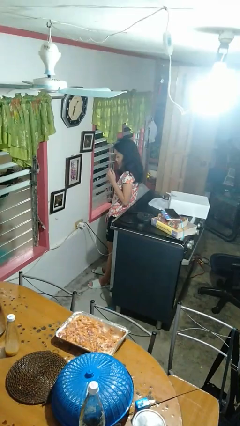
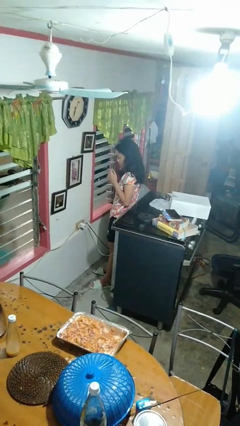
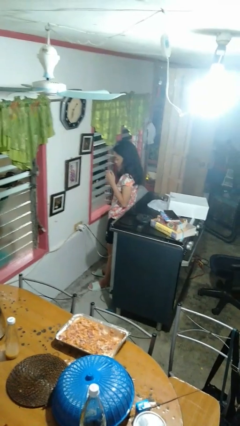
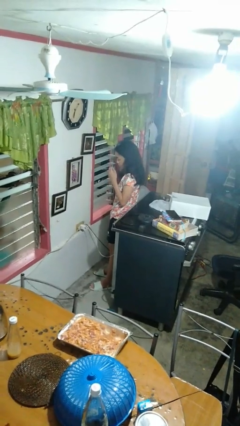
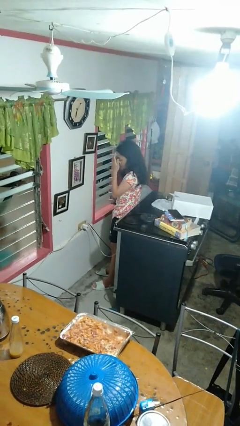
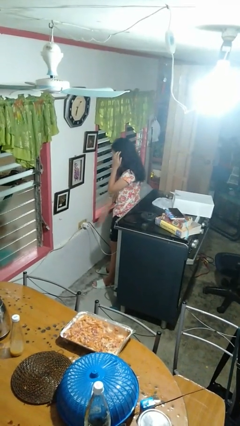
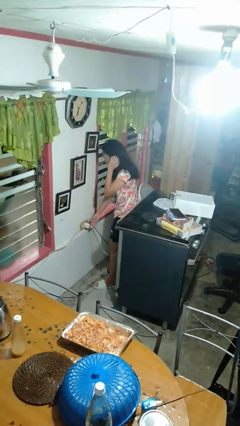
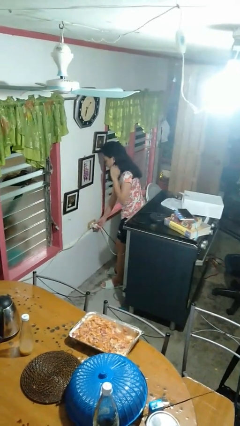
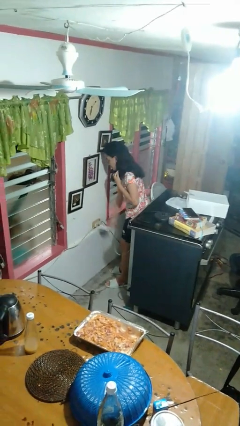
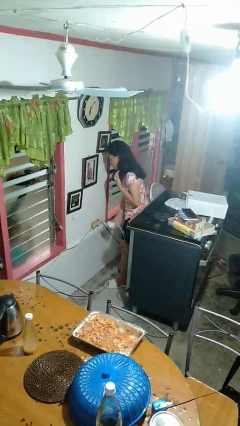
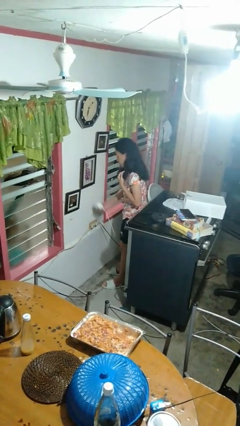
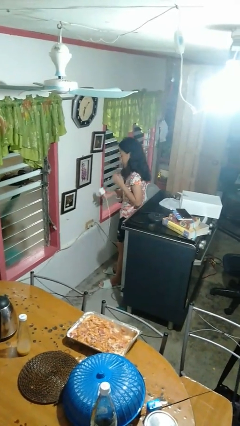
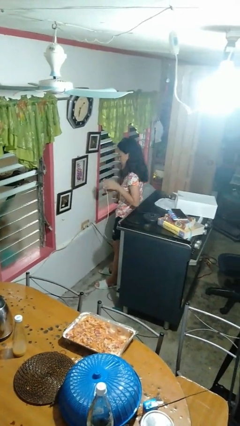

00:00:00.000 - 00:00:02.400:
person unplugs from electrical socket

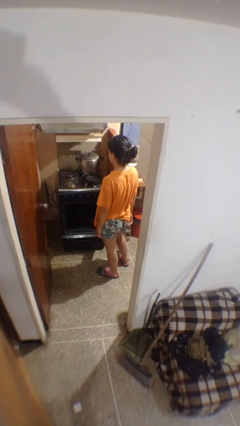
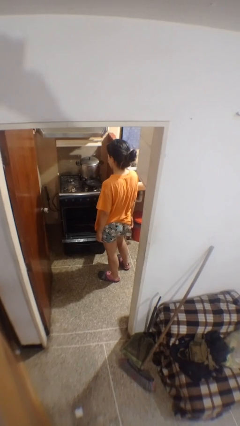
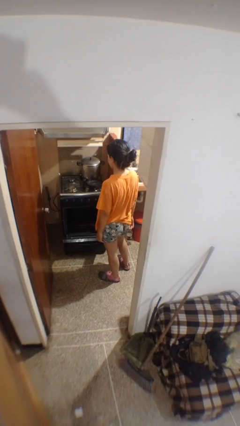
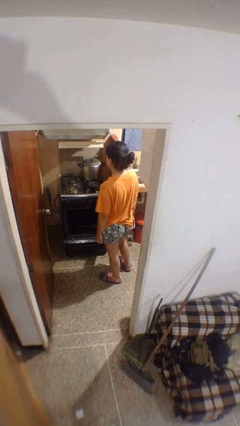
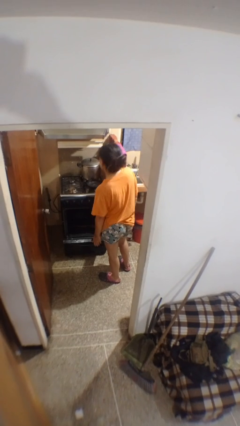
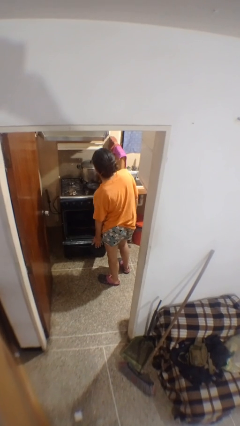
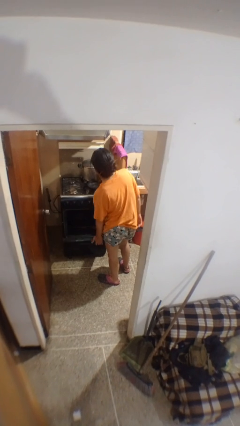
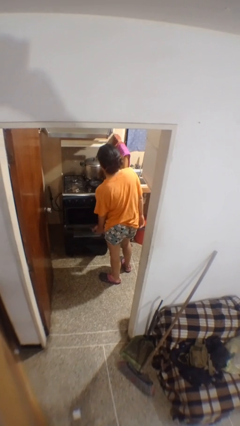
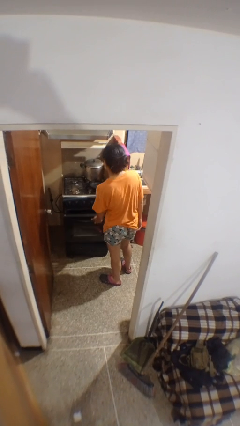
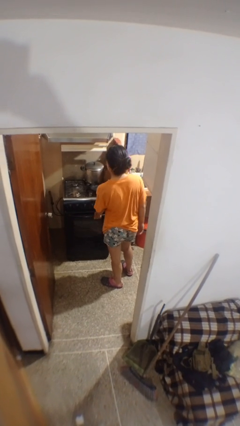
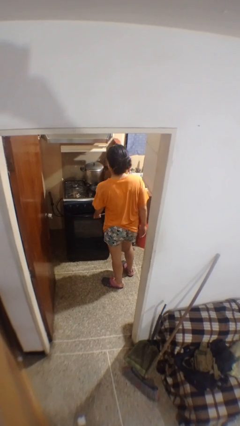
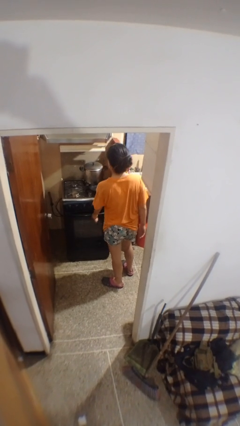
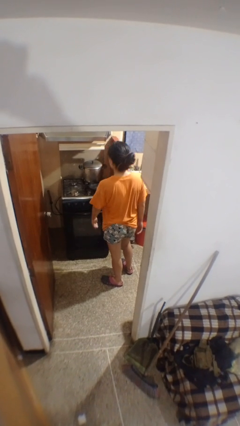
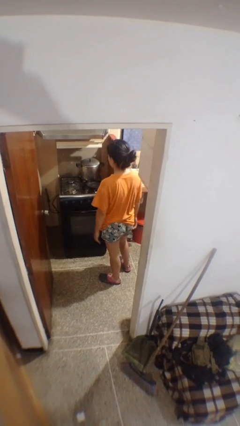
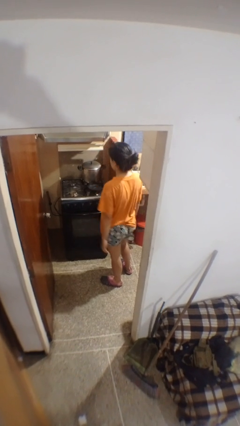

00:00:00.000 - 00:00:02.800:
person closes oven door

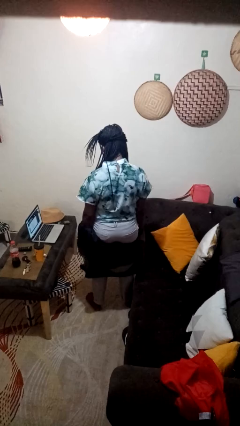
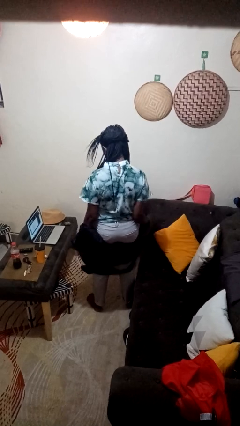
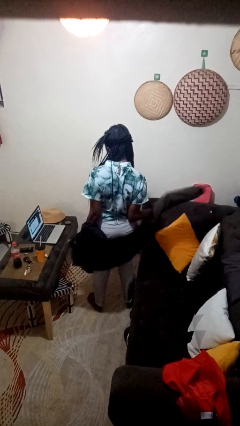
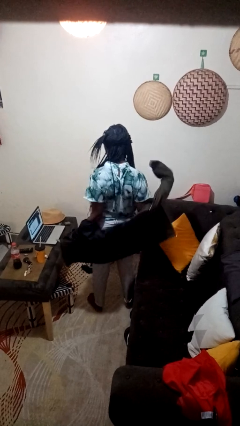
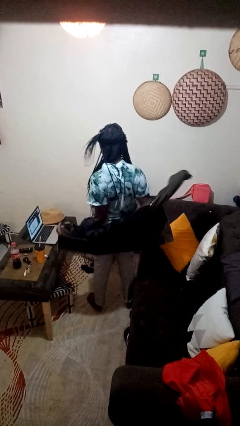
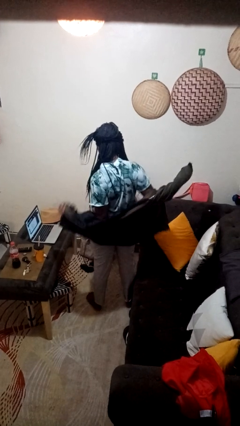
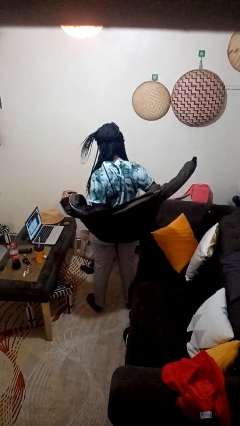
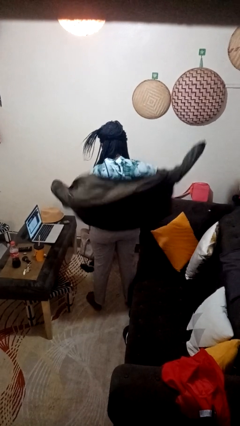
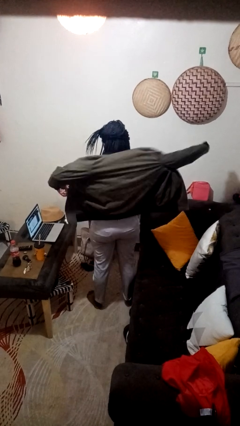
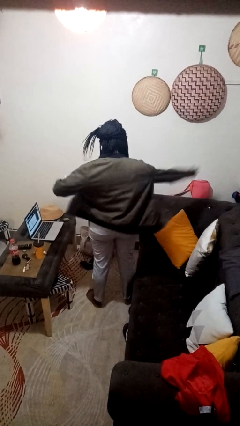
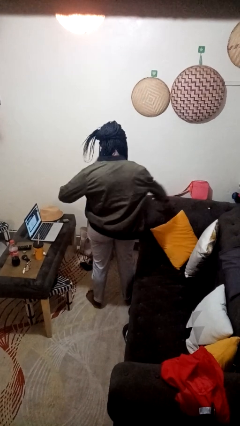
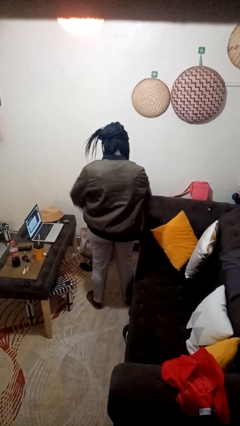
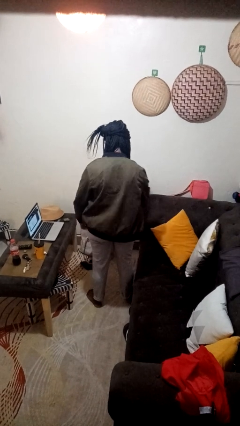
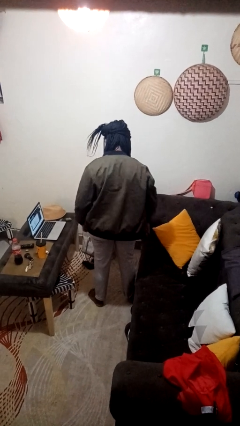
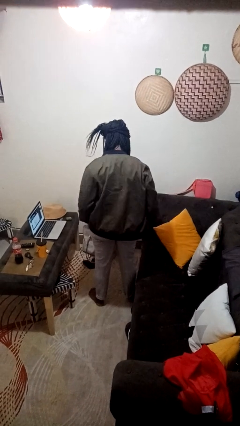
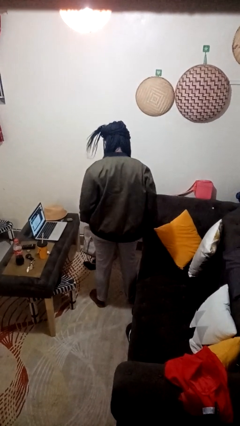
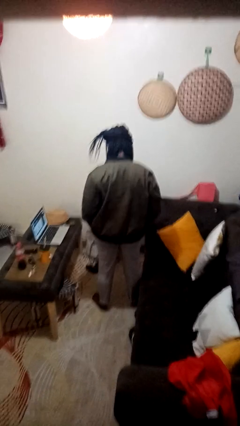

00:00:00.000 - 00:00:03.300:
person puts on jacket

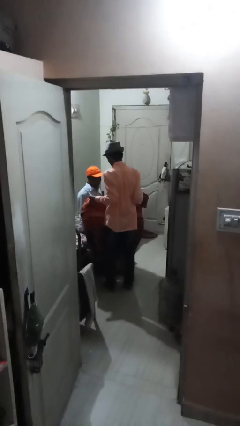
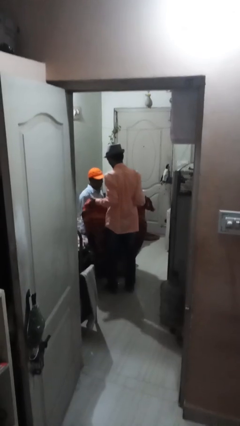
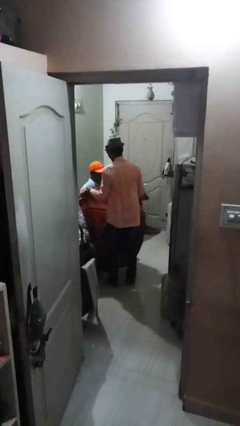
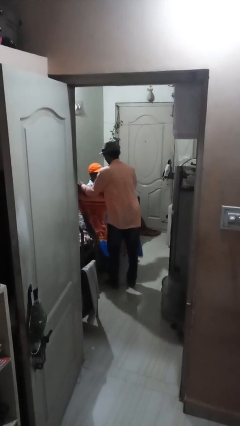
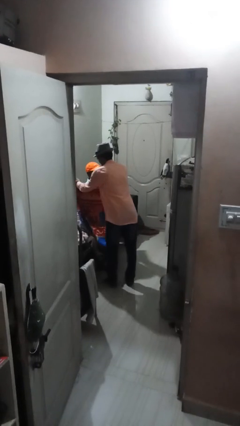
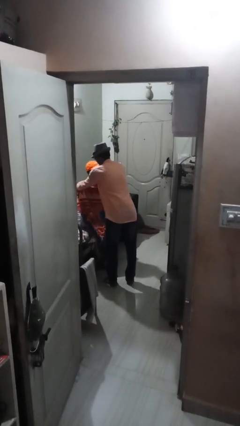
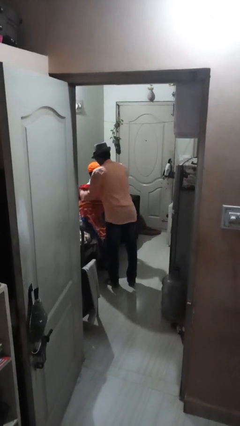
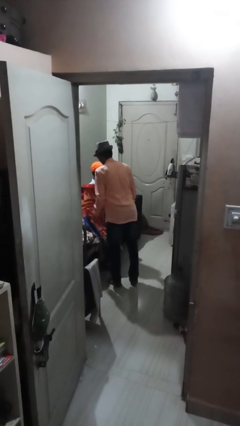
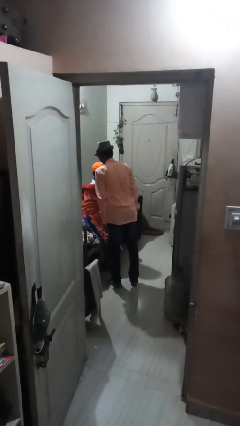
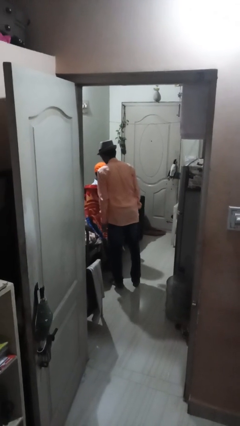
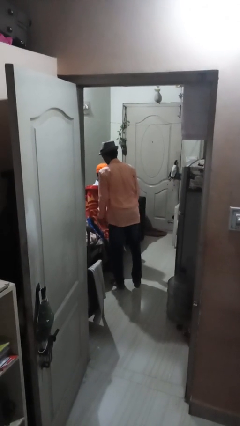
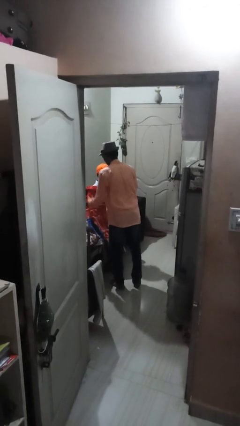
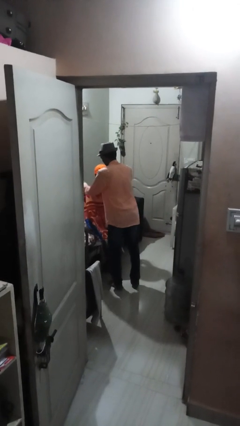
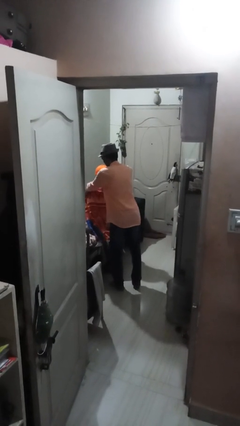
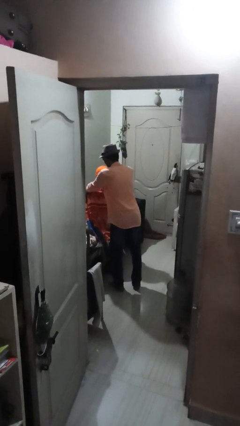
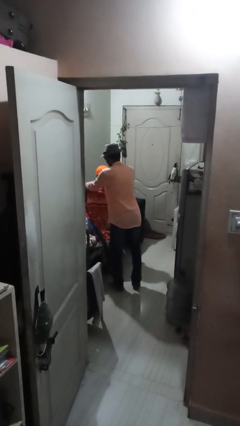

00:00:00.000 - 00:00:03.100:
person covers friend with blanket

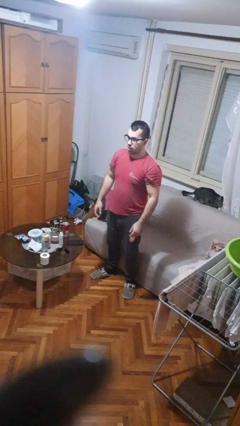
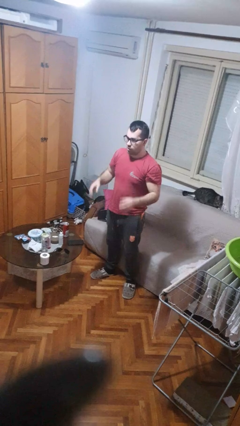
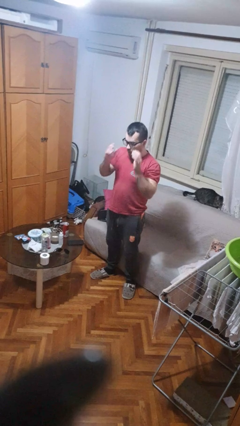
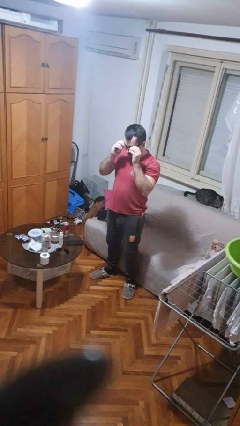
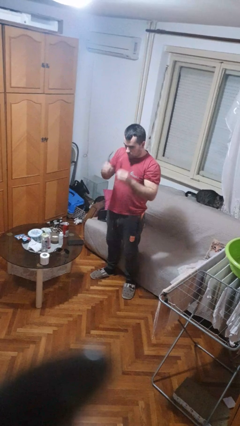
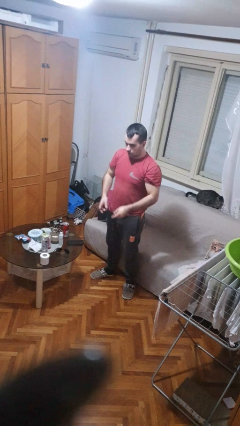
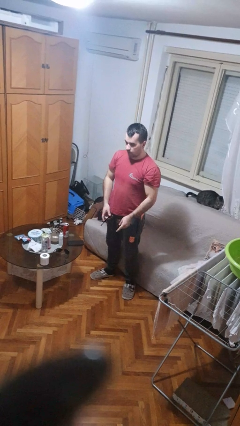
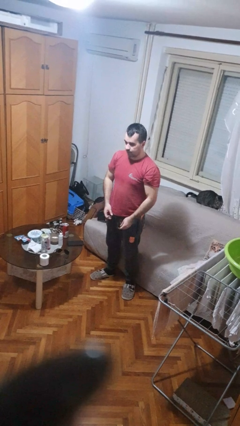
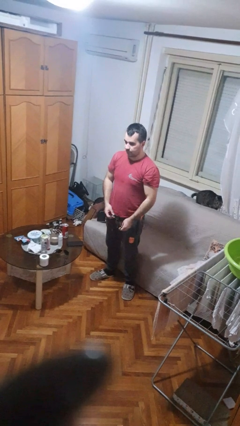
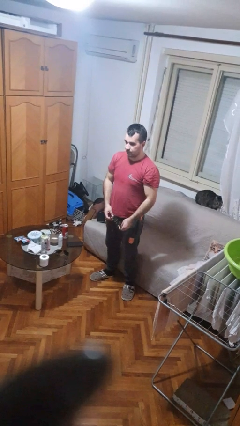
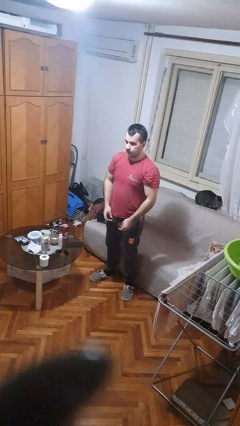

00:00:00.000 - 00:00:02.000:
person takes off glasses

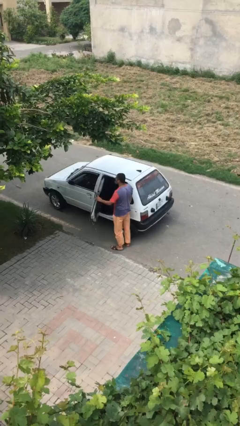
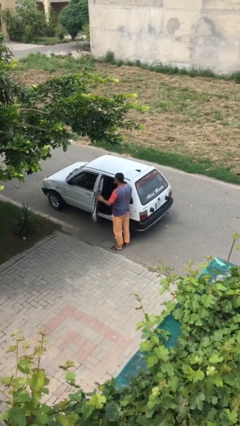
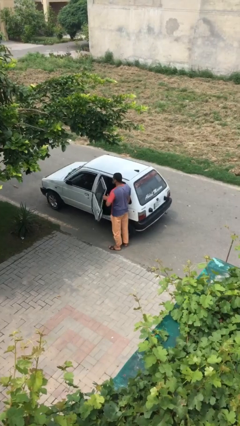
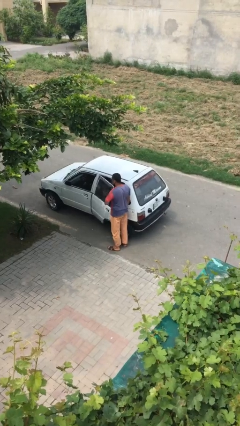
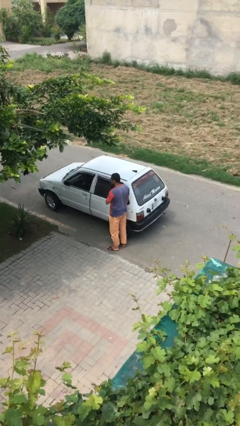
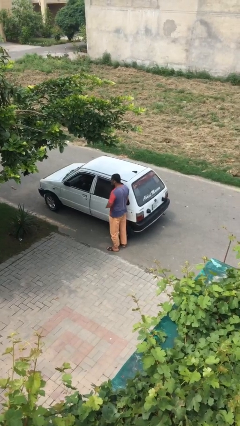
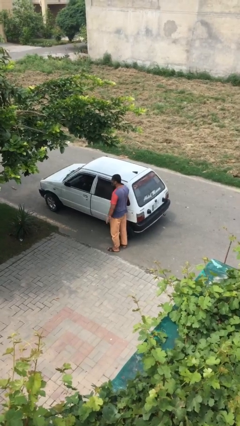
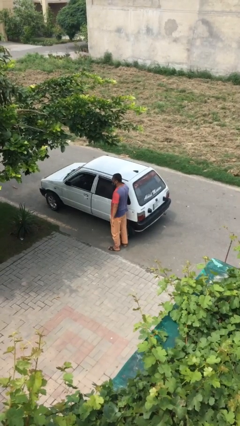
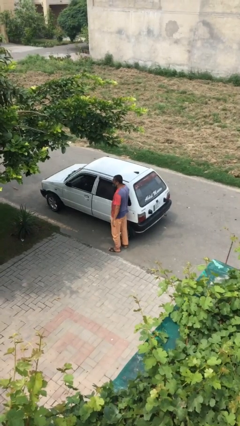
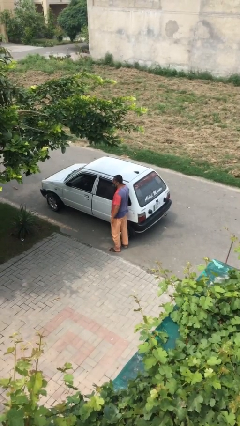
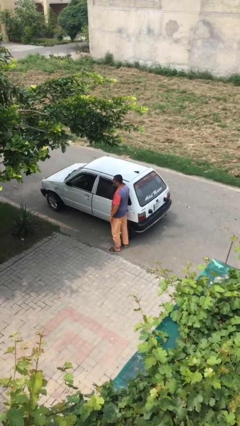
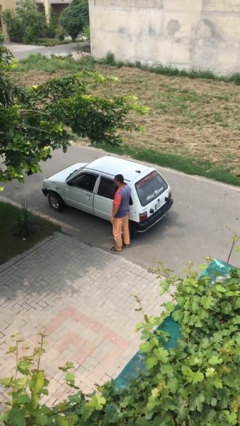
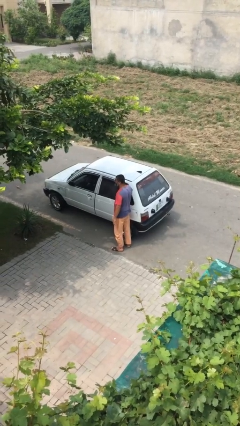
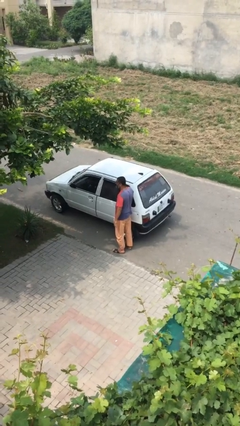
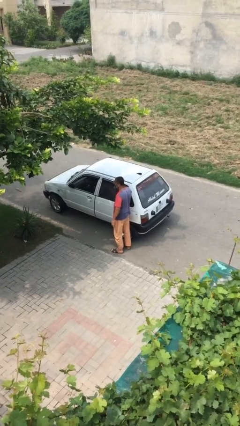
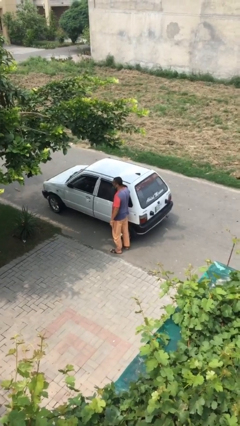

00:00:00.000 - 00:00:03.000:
person closes car door

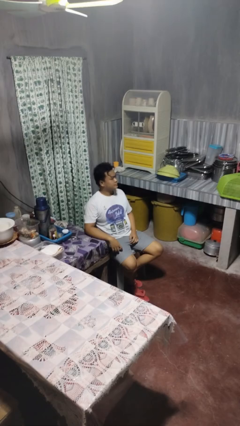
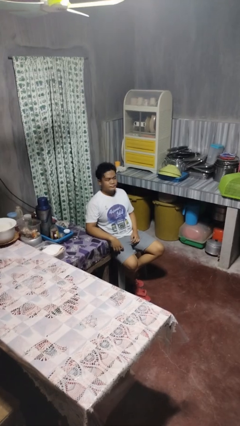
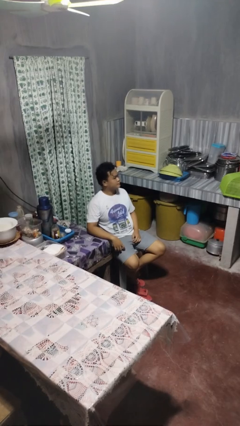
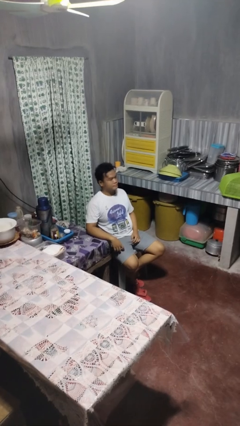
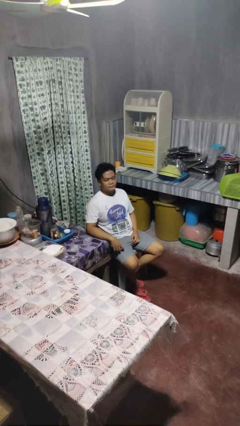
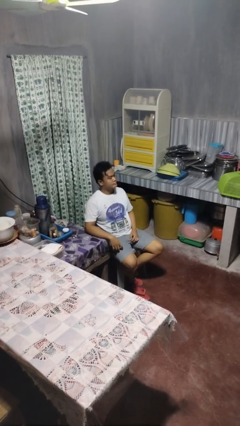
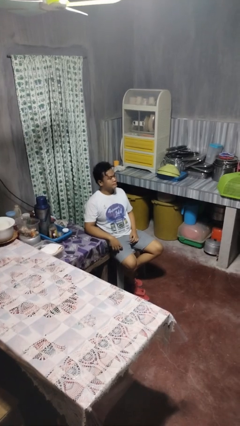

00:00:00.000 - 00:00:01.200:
person shakes head
